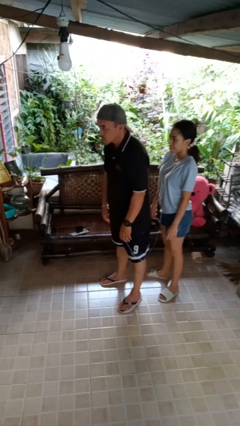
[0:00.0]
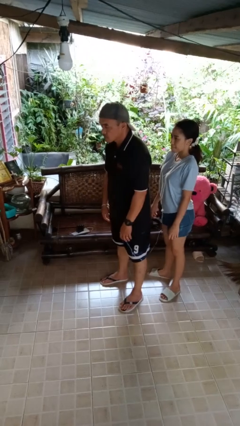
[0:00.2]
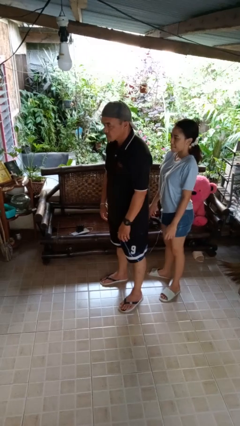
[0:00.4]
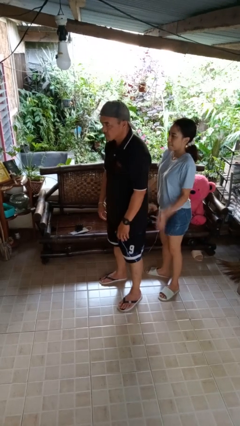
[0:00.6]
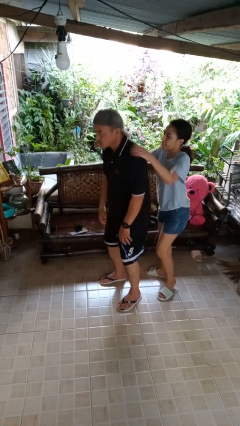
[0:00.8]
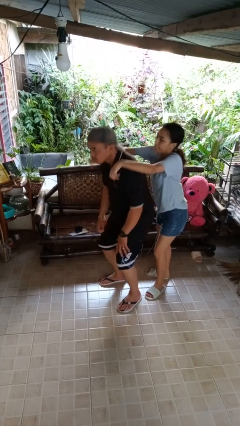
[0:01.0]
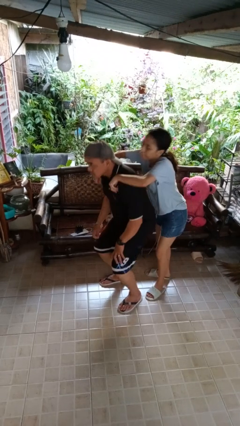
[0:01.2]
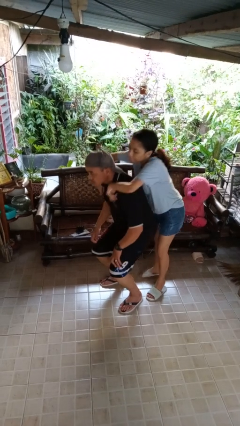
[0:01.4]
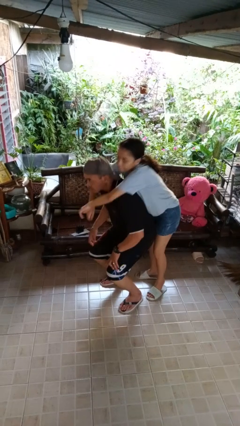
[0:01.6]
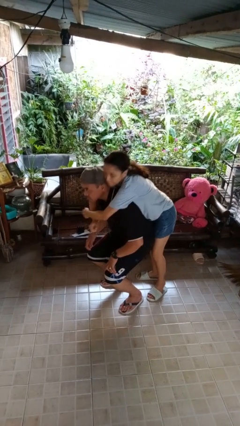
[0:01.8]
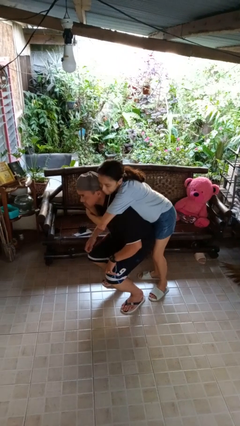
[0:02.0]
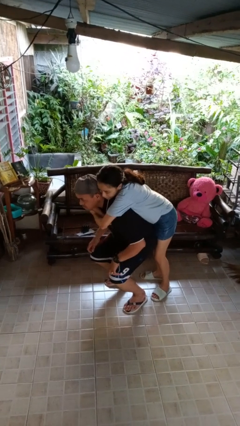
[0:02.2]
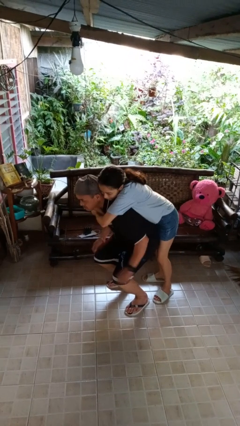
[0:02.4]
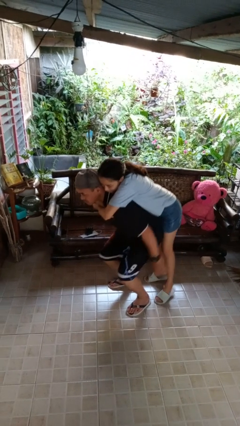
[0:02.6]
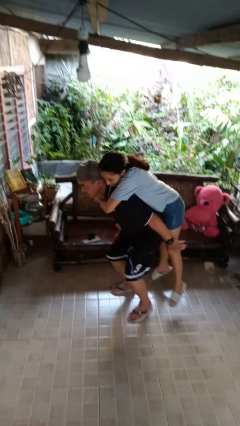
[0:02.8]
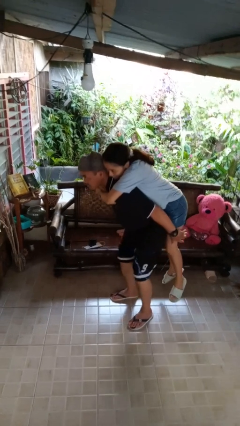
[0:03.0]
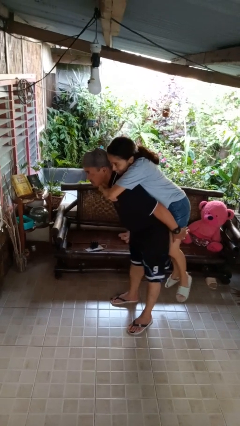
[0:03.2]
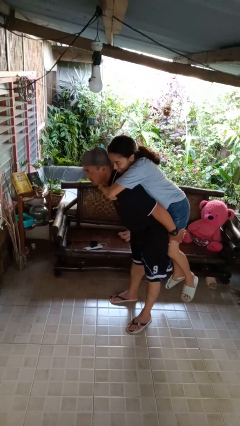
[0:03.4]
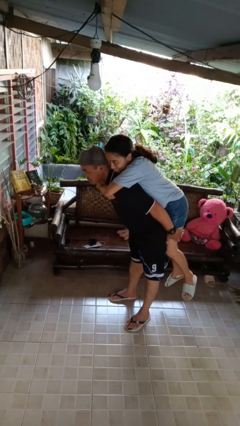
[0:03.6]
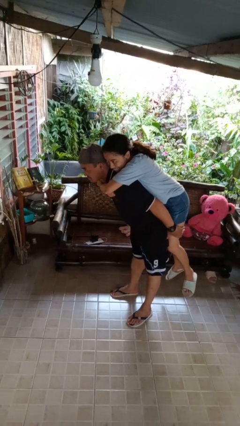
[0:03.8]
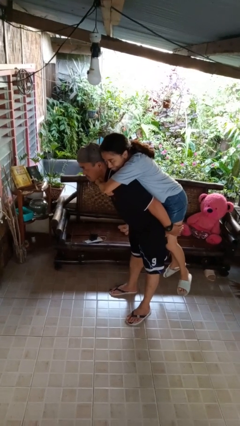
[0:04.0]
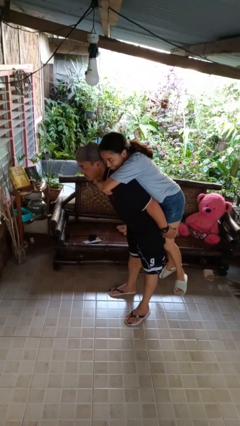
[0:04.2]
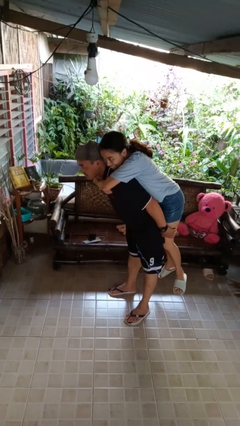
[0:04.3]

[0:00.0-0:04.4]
person picks up person

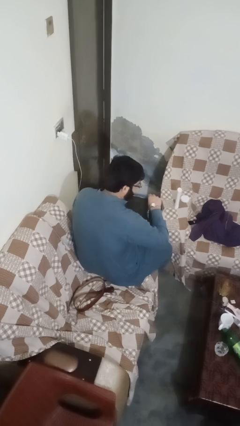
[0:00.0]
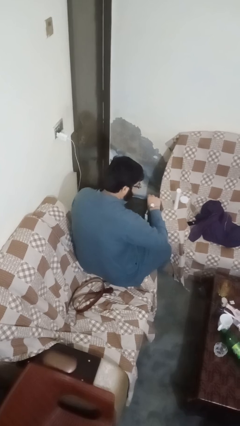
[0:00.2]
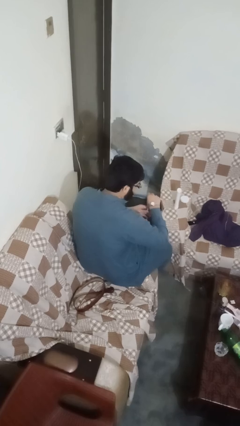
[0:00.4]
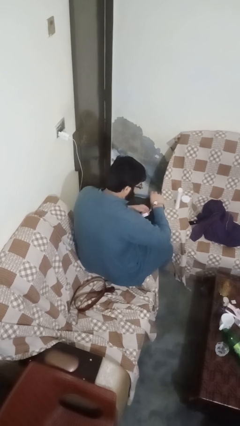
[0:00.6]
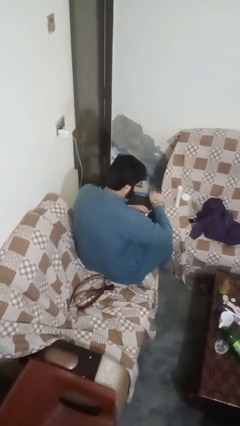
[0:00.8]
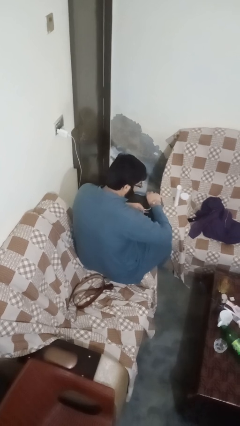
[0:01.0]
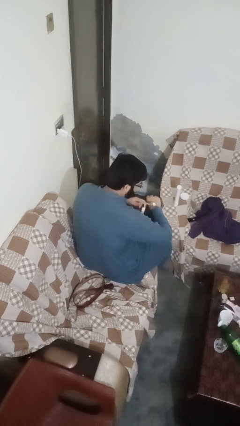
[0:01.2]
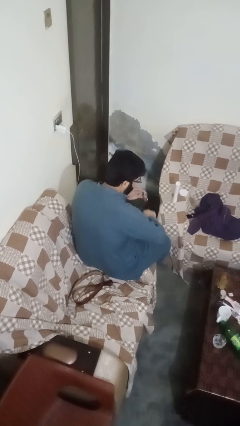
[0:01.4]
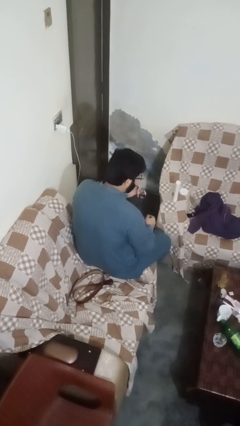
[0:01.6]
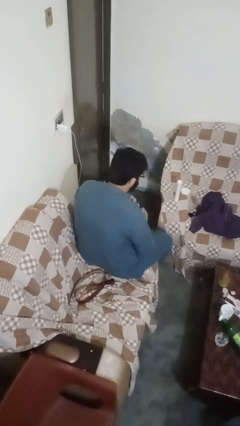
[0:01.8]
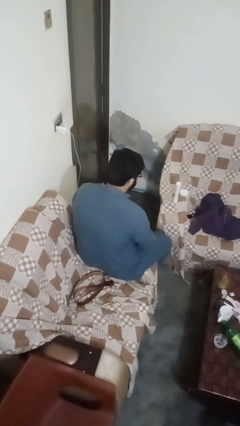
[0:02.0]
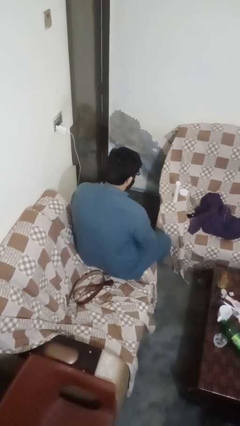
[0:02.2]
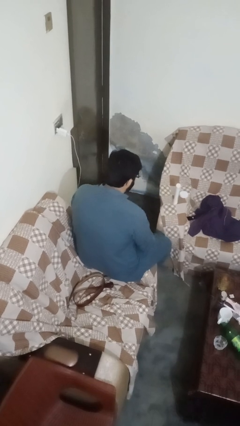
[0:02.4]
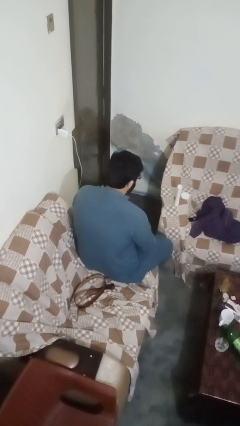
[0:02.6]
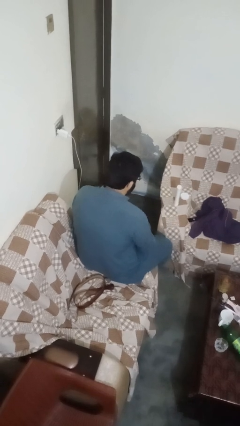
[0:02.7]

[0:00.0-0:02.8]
person takes off wristwatch

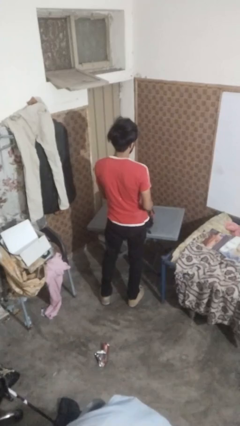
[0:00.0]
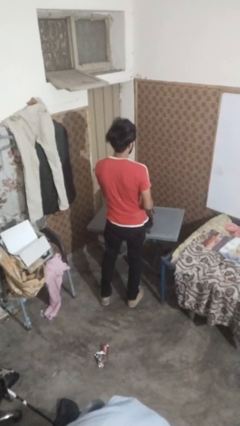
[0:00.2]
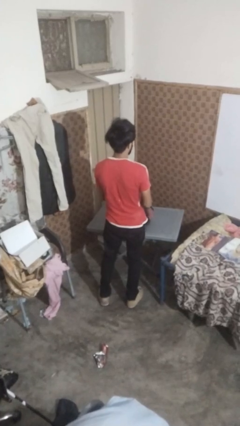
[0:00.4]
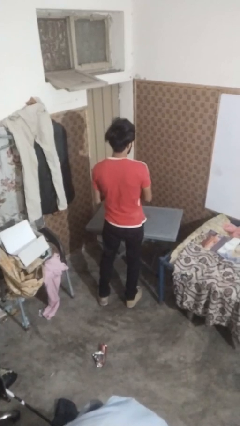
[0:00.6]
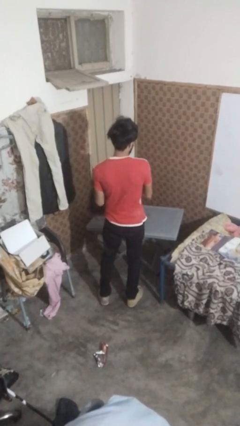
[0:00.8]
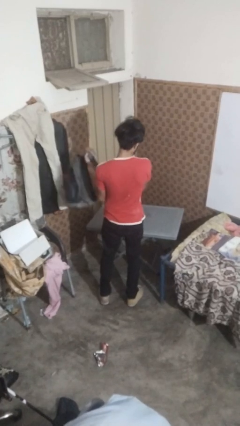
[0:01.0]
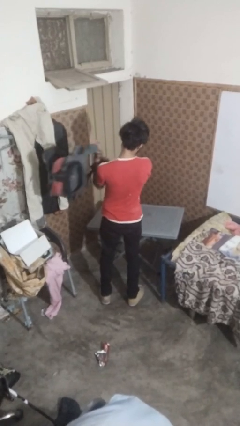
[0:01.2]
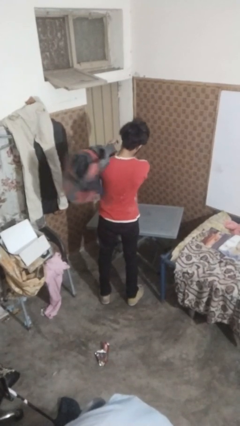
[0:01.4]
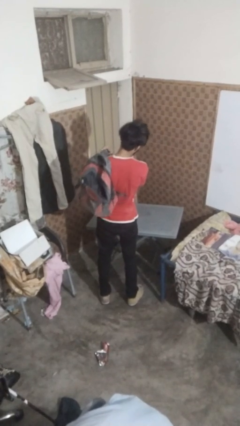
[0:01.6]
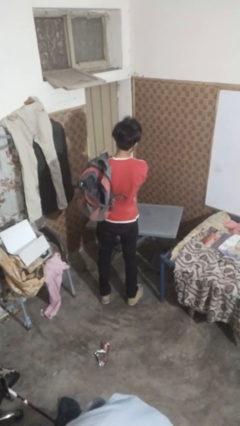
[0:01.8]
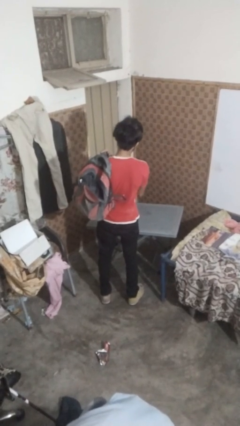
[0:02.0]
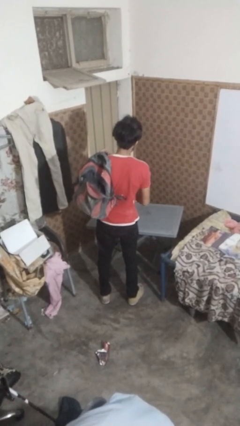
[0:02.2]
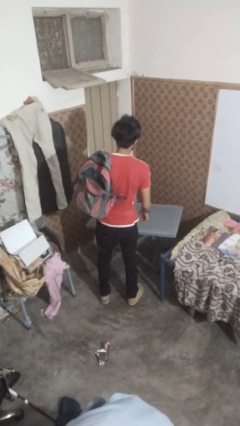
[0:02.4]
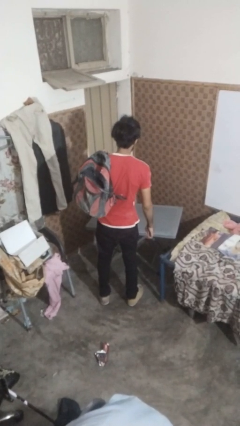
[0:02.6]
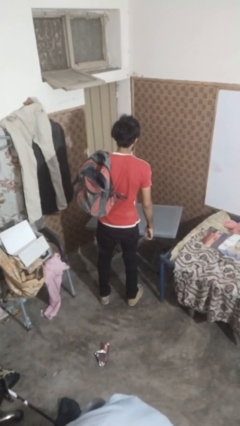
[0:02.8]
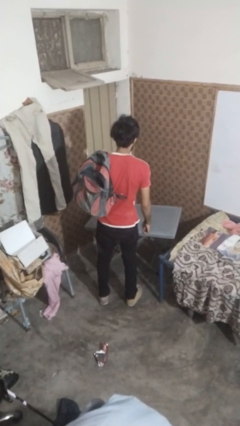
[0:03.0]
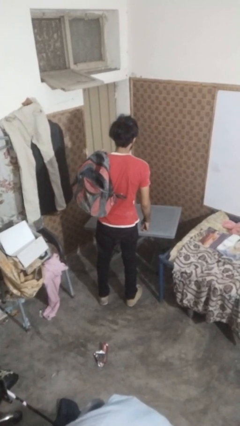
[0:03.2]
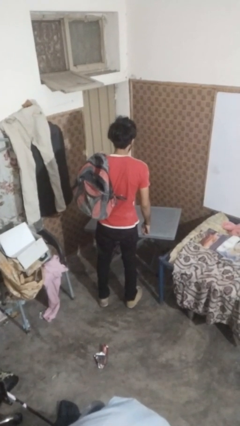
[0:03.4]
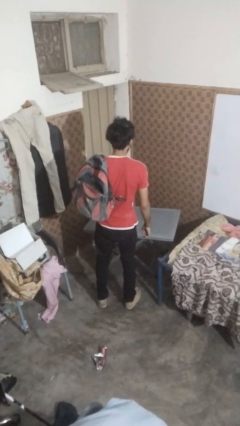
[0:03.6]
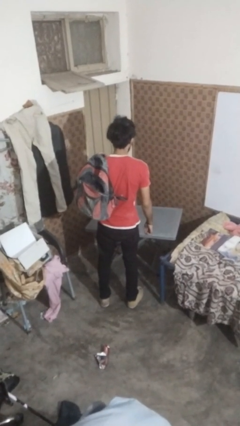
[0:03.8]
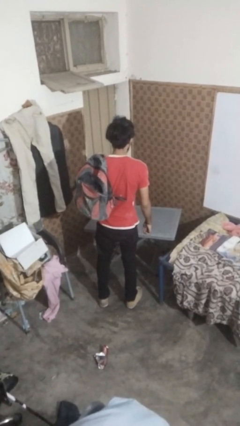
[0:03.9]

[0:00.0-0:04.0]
person puts on backpack

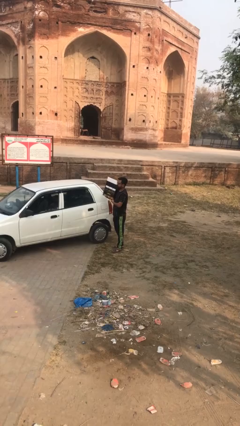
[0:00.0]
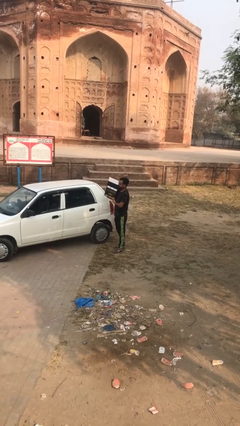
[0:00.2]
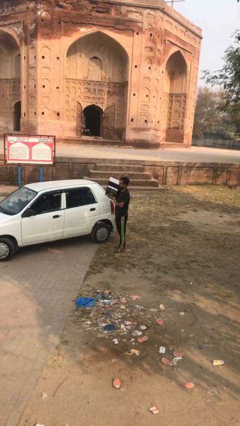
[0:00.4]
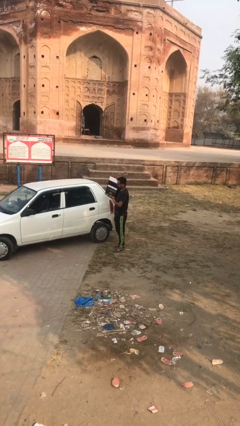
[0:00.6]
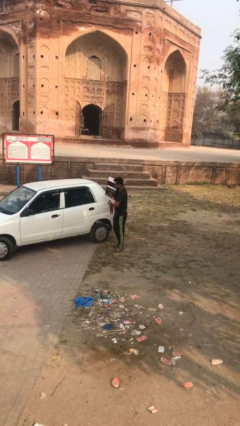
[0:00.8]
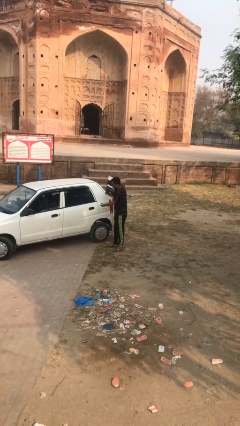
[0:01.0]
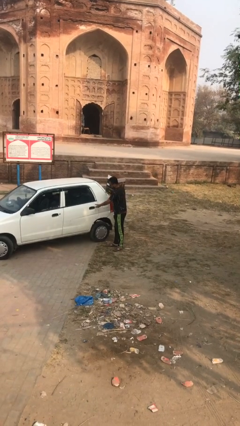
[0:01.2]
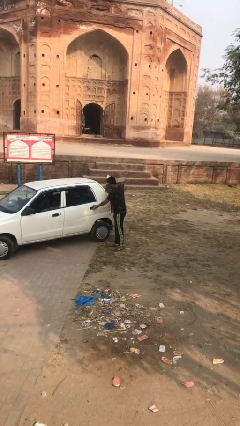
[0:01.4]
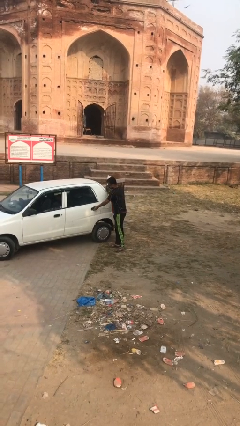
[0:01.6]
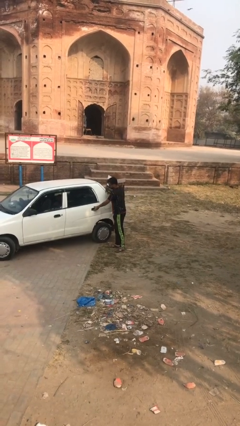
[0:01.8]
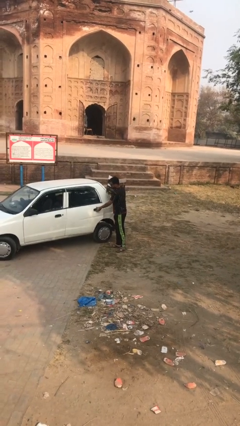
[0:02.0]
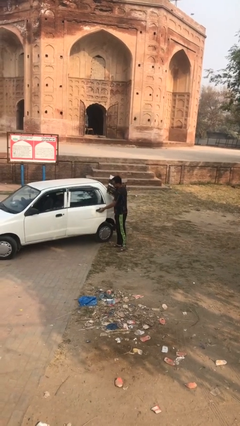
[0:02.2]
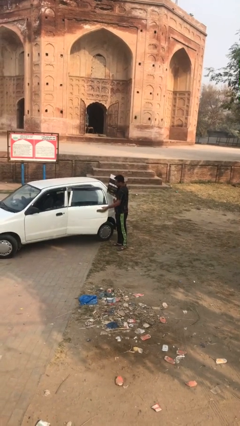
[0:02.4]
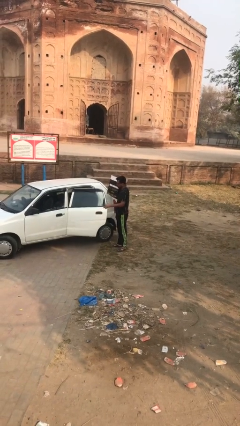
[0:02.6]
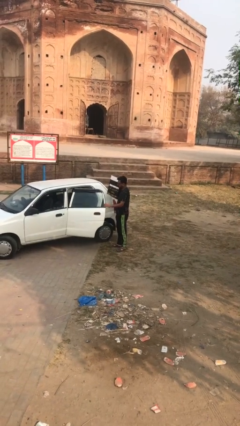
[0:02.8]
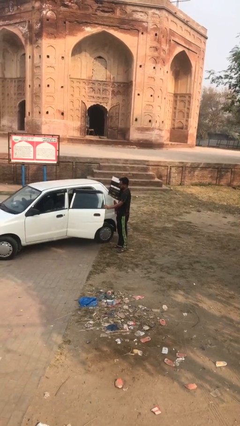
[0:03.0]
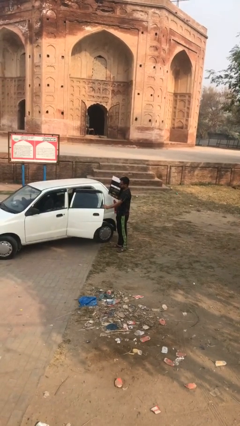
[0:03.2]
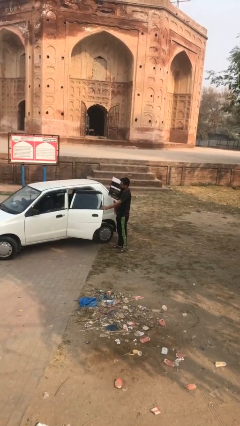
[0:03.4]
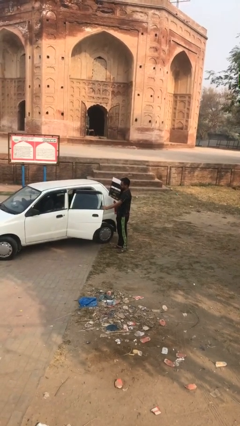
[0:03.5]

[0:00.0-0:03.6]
person opens car door

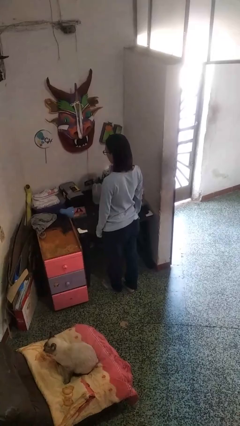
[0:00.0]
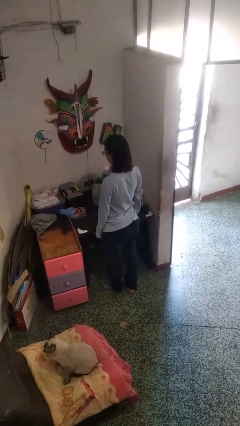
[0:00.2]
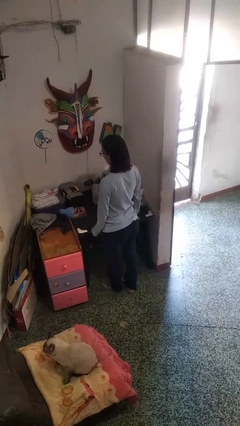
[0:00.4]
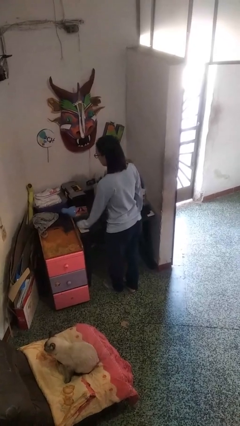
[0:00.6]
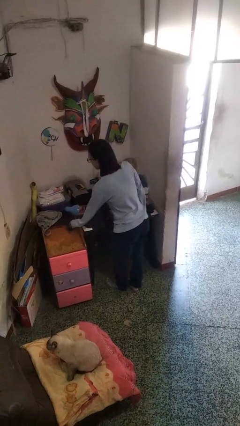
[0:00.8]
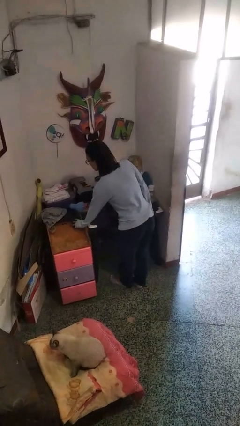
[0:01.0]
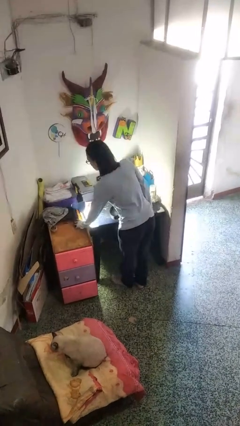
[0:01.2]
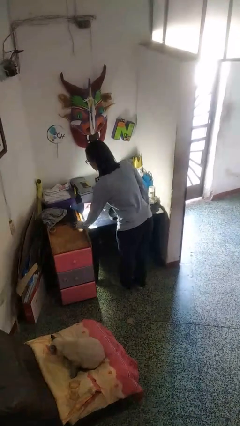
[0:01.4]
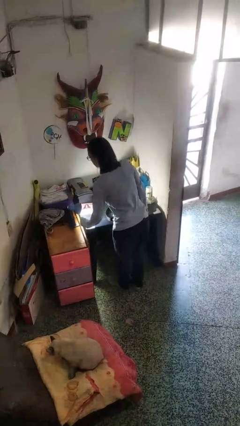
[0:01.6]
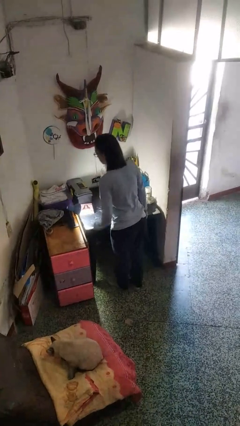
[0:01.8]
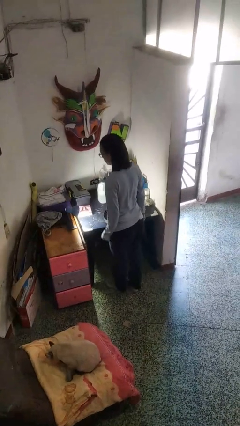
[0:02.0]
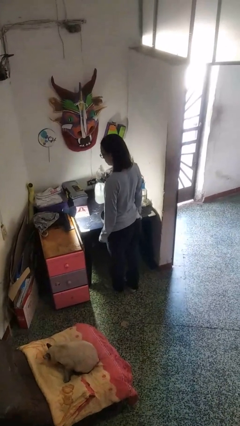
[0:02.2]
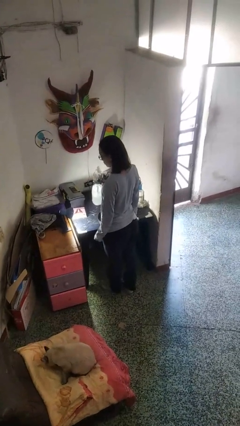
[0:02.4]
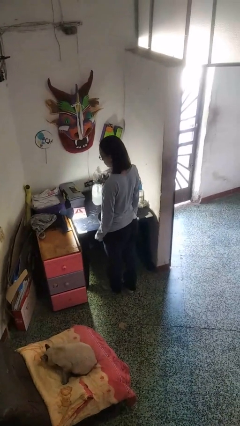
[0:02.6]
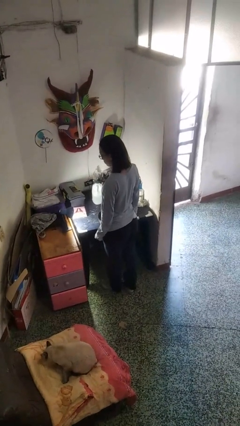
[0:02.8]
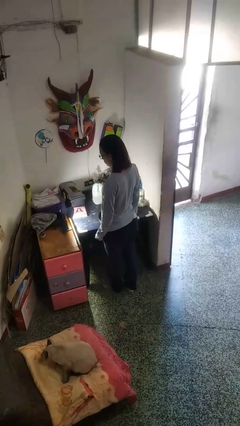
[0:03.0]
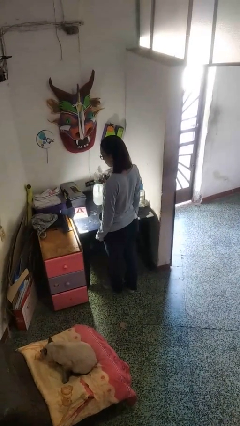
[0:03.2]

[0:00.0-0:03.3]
person turns on lamp
